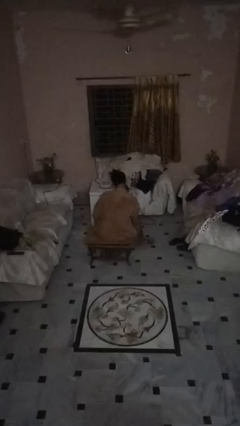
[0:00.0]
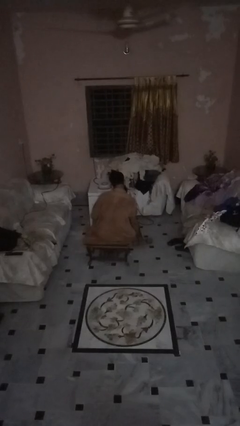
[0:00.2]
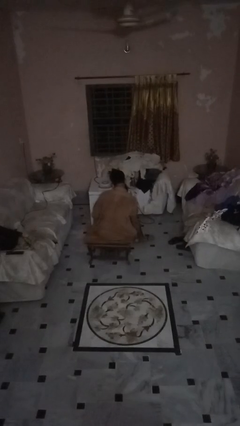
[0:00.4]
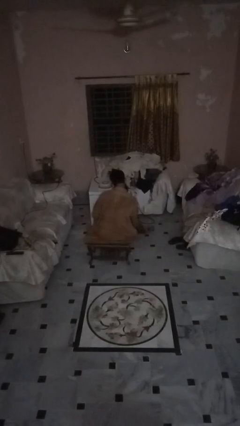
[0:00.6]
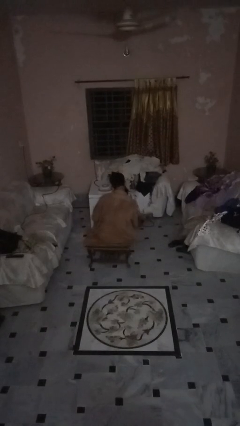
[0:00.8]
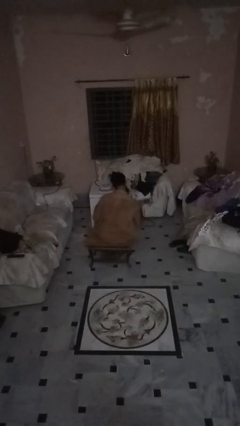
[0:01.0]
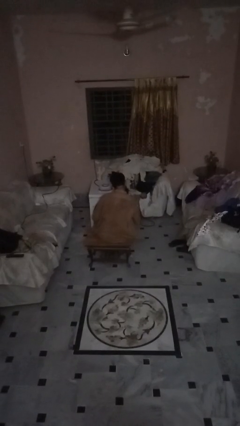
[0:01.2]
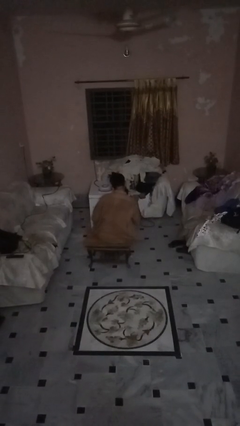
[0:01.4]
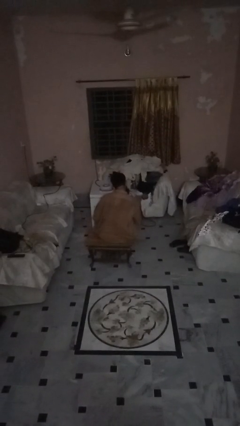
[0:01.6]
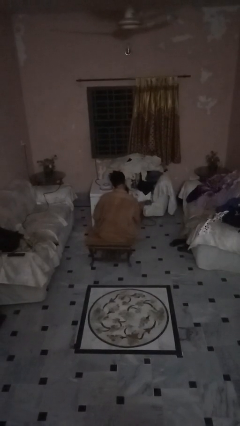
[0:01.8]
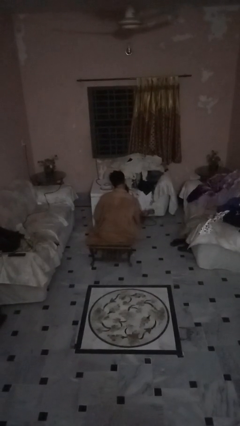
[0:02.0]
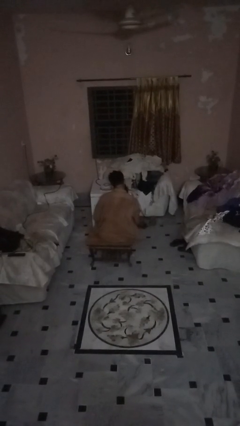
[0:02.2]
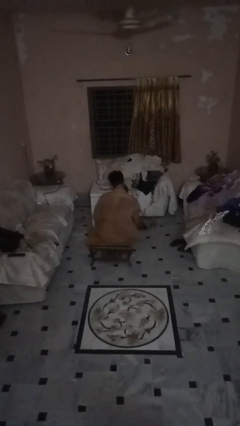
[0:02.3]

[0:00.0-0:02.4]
person lifts dumbbells

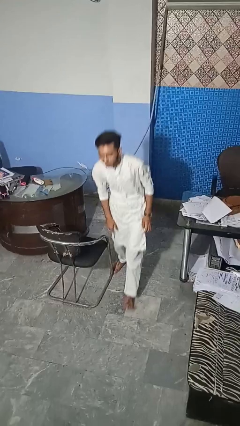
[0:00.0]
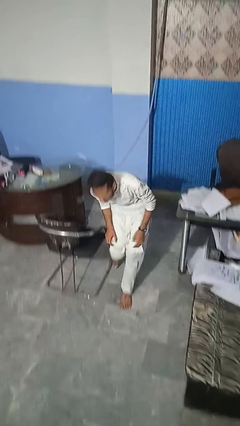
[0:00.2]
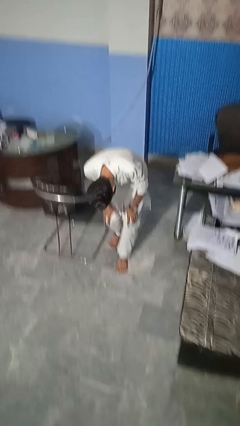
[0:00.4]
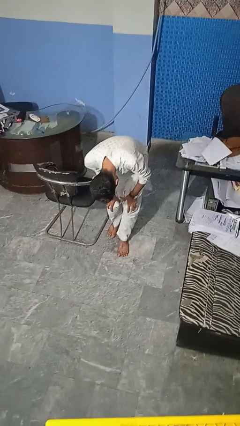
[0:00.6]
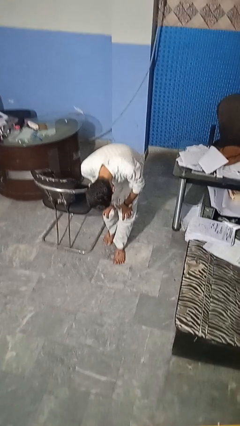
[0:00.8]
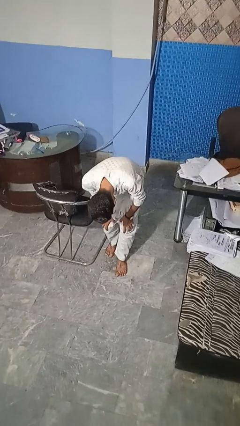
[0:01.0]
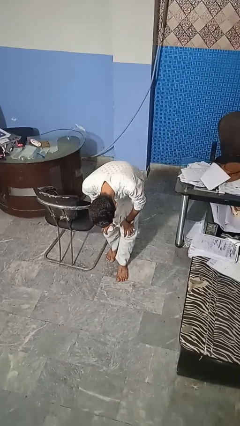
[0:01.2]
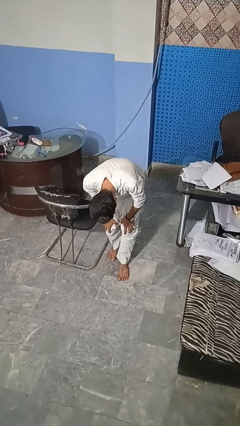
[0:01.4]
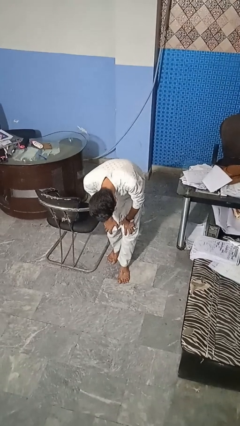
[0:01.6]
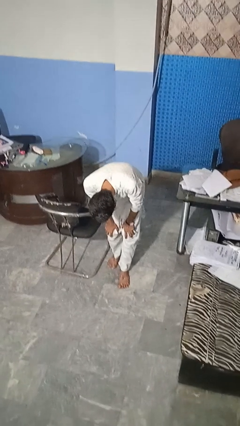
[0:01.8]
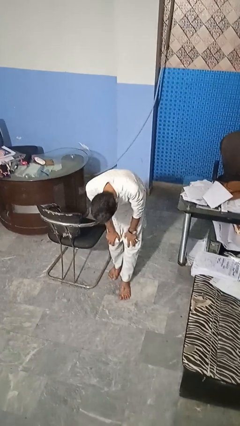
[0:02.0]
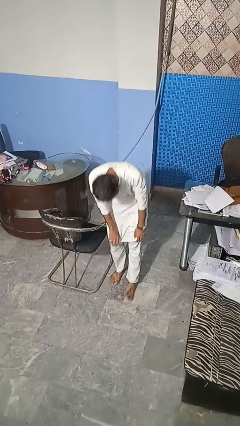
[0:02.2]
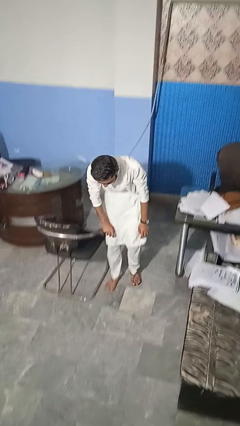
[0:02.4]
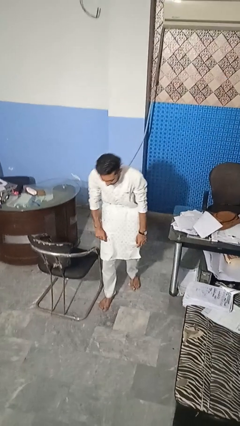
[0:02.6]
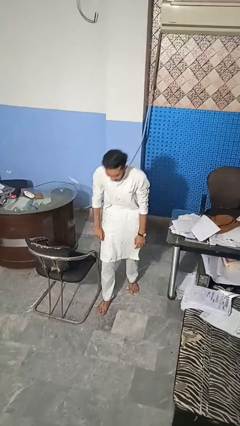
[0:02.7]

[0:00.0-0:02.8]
person stubs toe

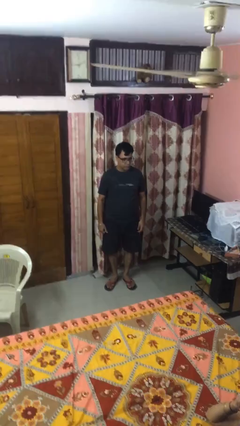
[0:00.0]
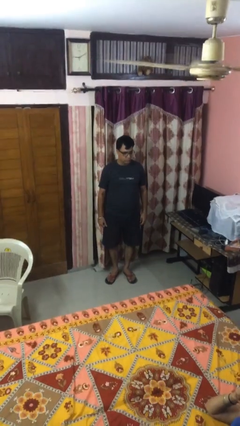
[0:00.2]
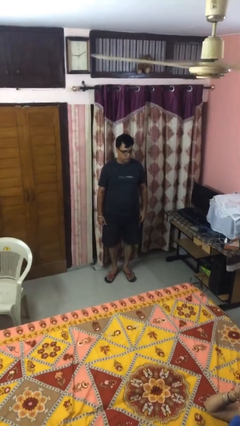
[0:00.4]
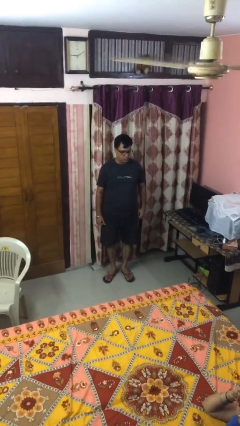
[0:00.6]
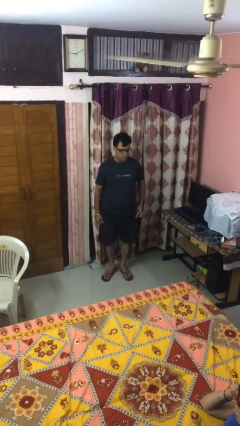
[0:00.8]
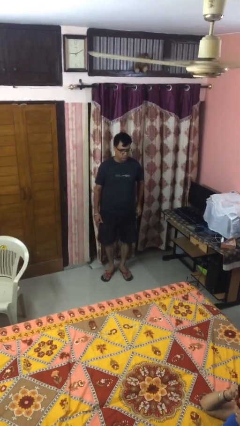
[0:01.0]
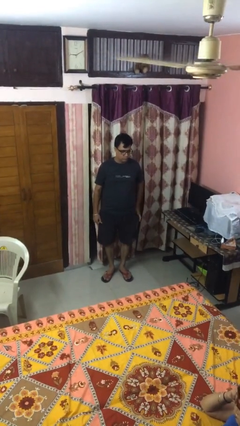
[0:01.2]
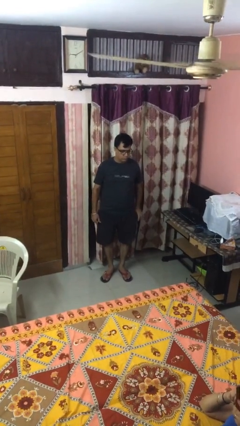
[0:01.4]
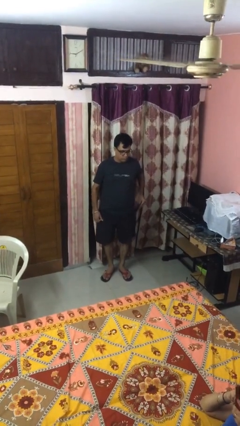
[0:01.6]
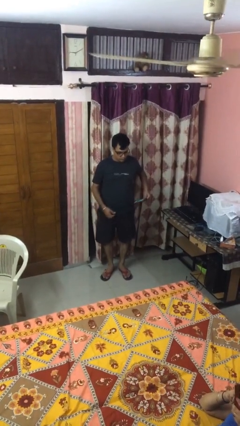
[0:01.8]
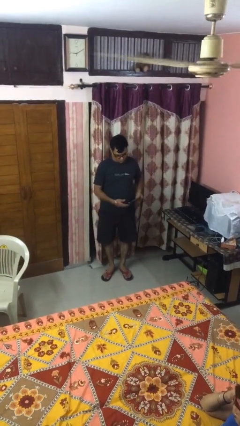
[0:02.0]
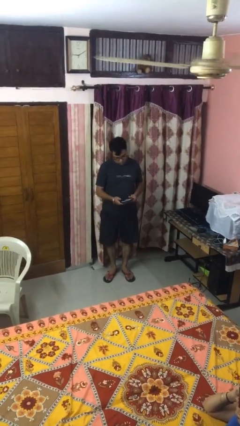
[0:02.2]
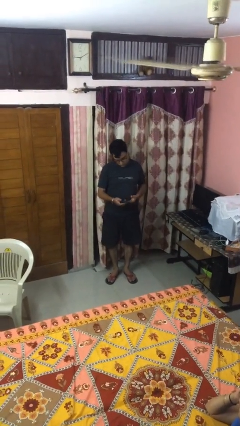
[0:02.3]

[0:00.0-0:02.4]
person takes phone from pocket

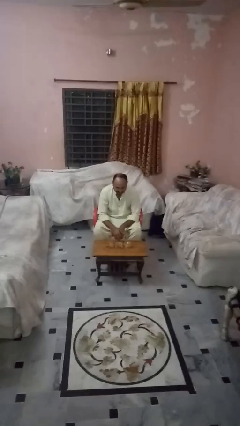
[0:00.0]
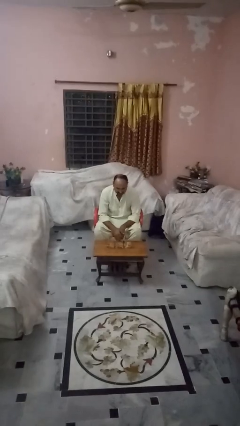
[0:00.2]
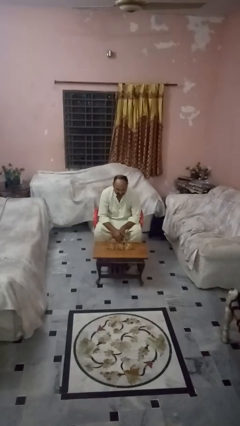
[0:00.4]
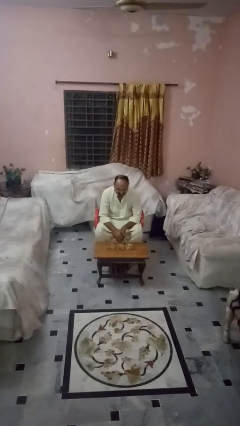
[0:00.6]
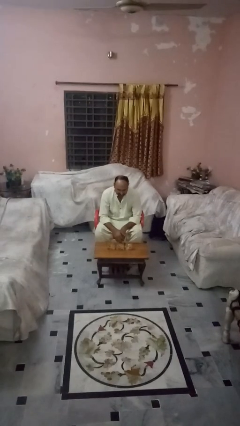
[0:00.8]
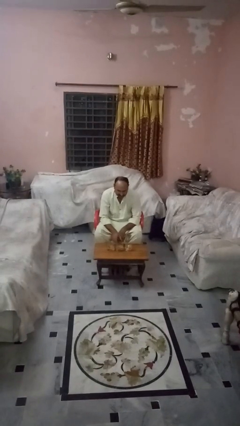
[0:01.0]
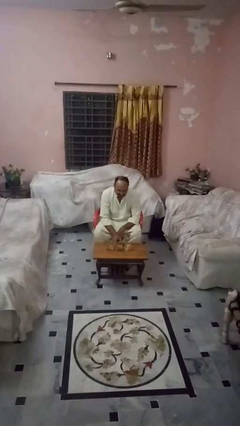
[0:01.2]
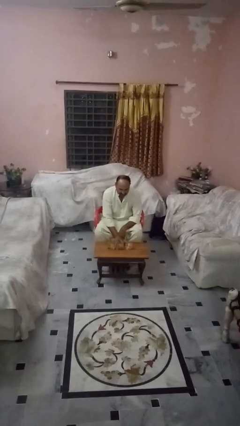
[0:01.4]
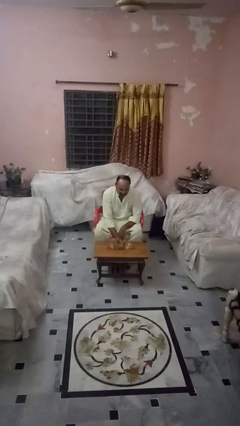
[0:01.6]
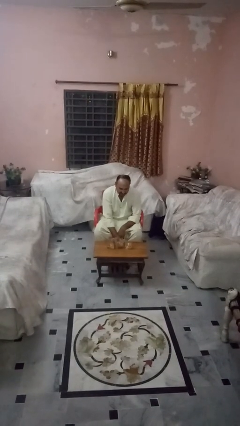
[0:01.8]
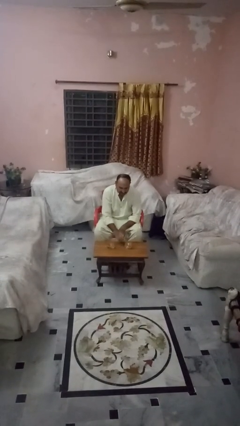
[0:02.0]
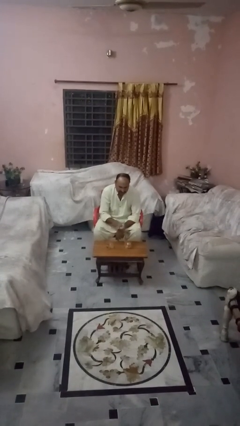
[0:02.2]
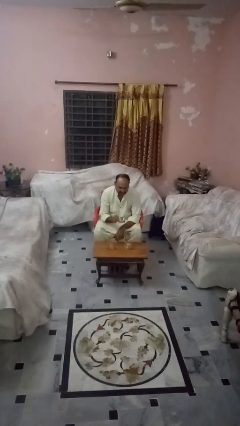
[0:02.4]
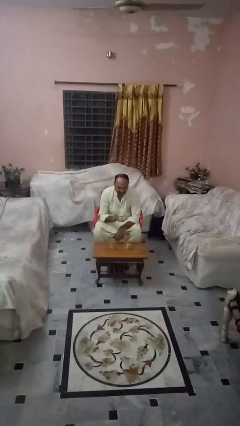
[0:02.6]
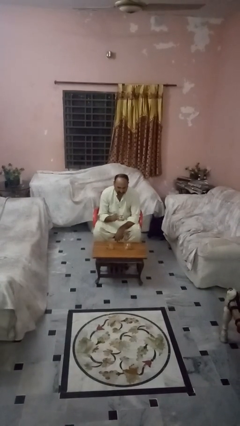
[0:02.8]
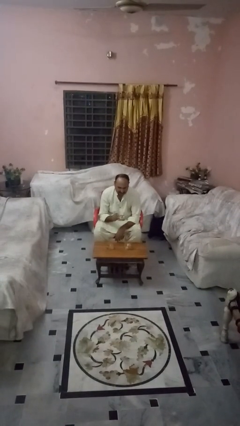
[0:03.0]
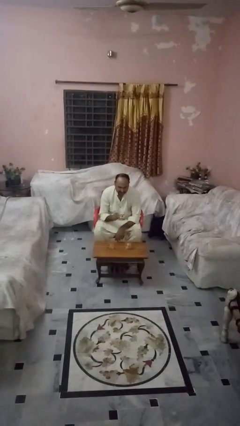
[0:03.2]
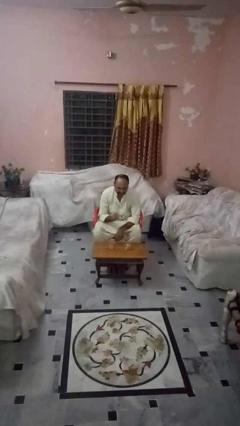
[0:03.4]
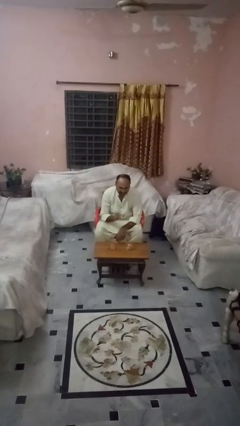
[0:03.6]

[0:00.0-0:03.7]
person picks up object from table

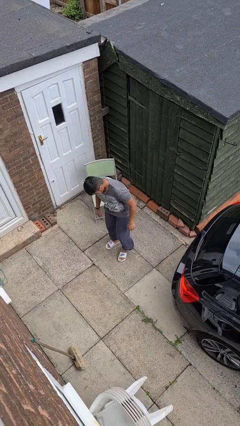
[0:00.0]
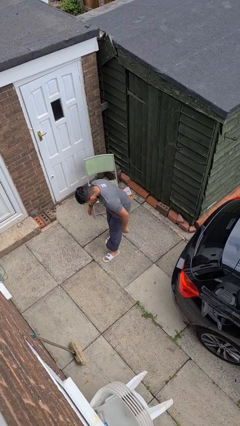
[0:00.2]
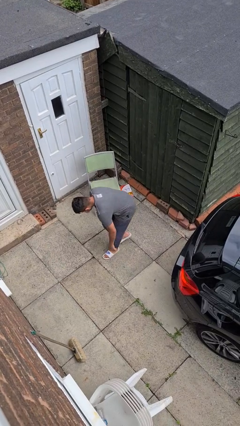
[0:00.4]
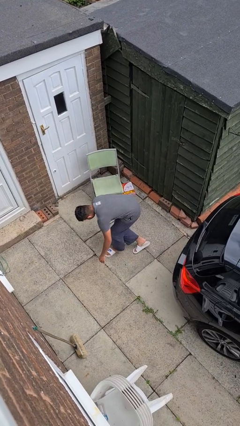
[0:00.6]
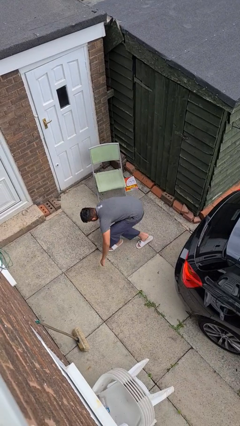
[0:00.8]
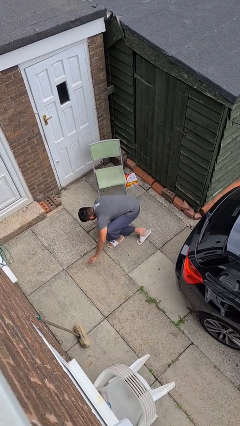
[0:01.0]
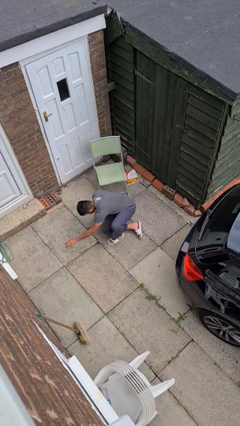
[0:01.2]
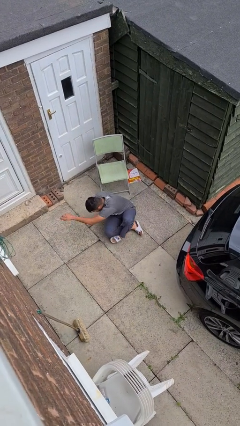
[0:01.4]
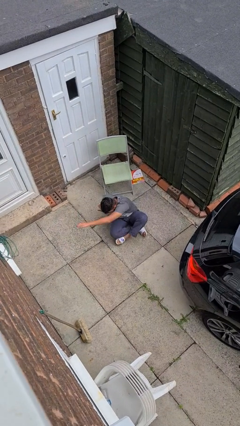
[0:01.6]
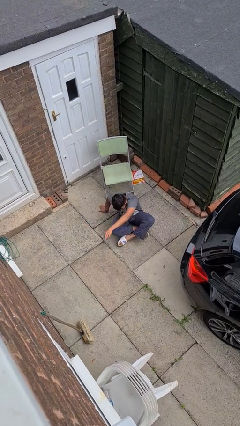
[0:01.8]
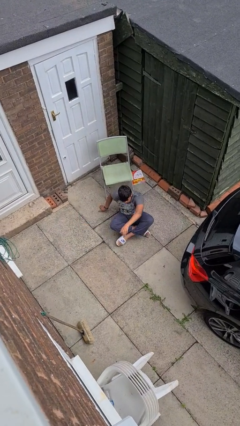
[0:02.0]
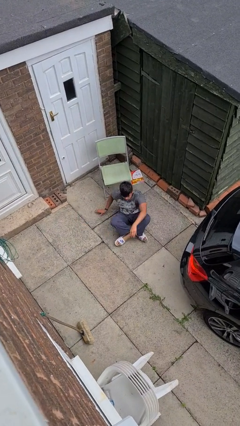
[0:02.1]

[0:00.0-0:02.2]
person sits crisscross

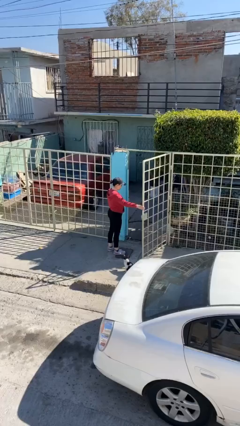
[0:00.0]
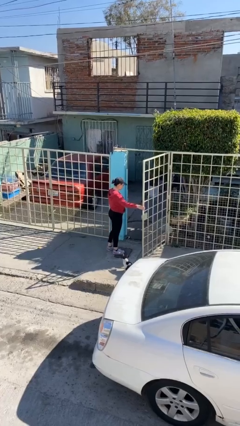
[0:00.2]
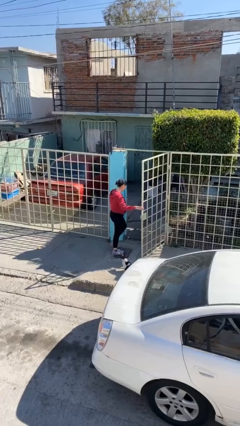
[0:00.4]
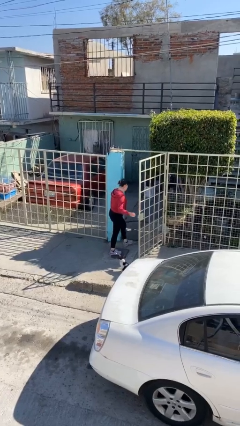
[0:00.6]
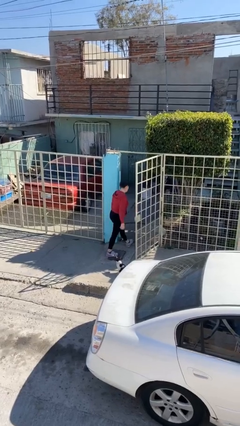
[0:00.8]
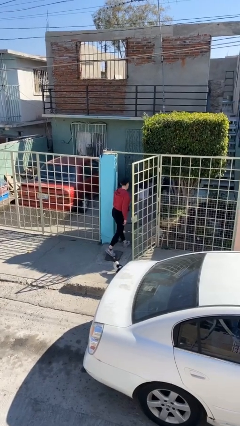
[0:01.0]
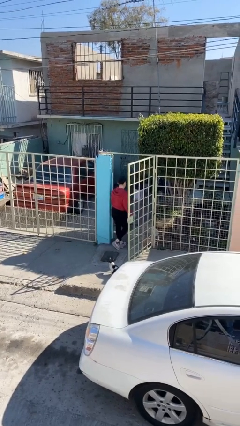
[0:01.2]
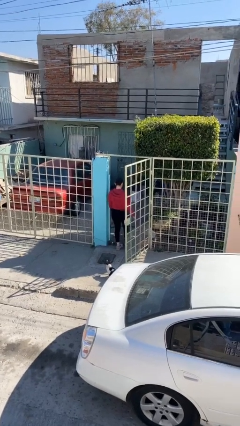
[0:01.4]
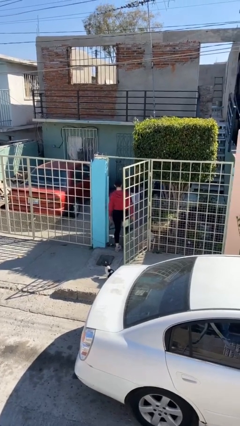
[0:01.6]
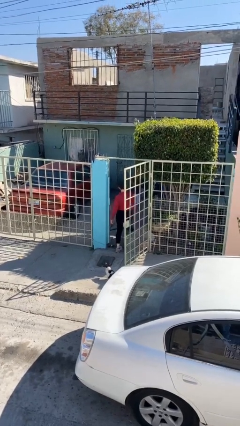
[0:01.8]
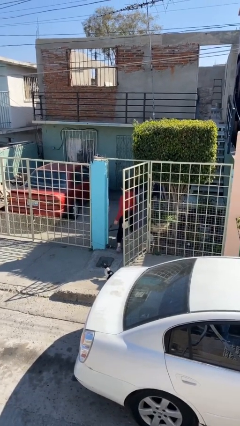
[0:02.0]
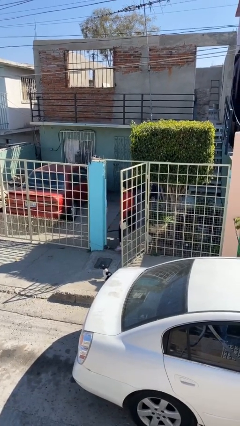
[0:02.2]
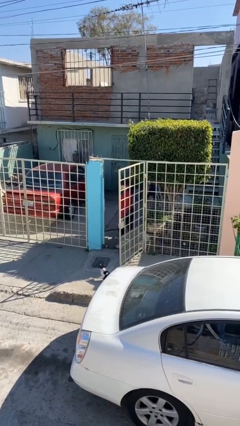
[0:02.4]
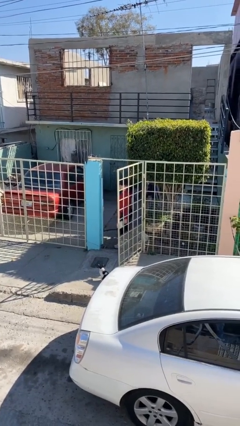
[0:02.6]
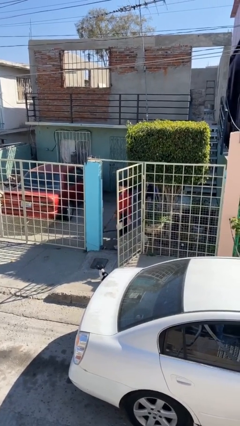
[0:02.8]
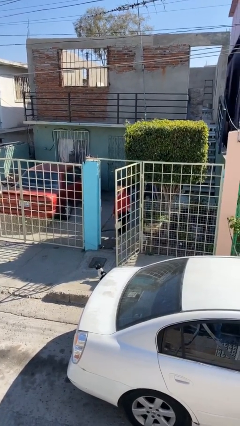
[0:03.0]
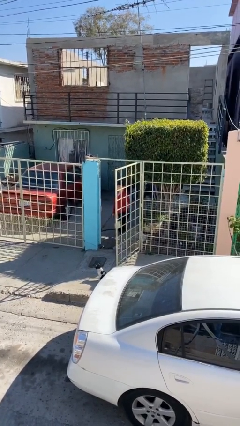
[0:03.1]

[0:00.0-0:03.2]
person exits scene through structure

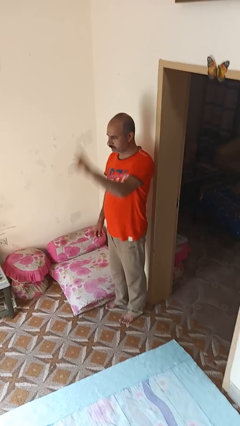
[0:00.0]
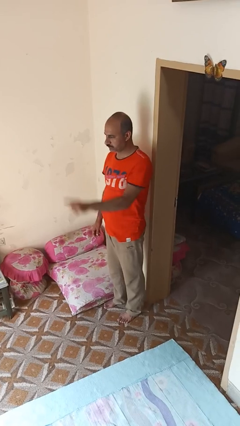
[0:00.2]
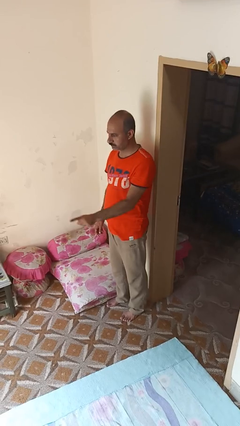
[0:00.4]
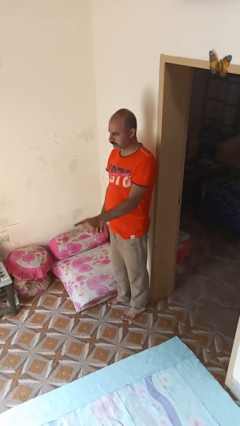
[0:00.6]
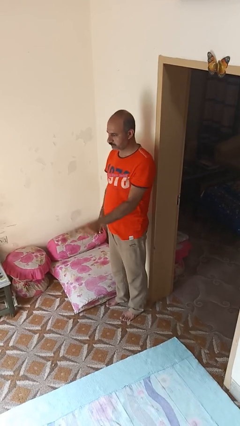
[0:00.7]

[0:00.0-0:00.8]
person gestures swipe down

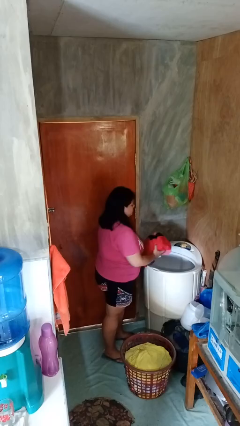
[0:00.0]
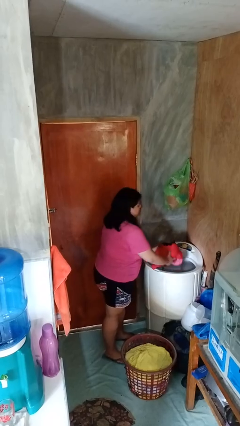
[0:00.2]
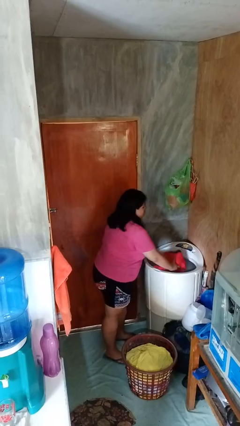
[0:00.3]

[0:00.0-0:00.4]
person loads clotheswasher
